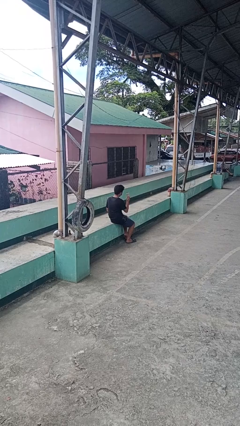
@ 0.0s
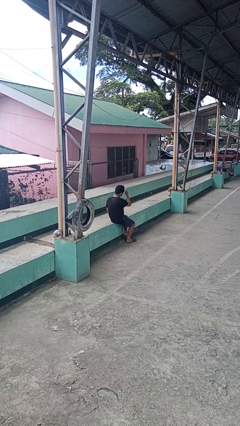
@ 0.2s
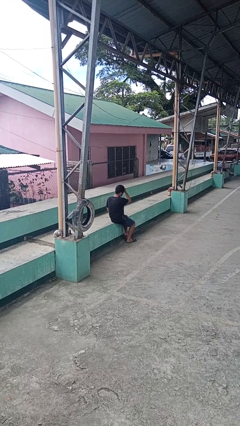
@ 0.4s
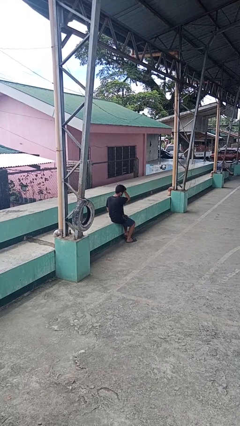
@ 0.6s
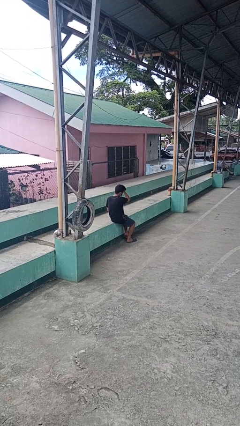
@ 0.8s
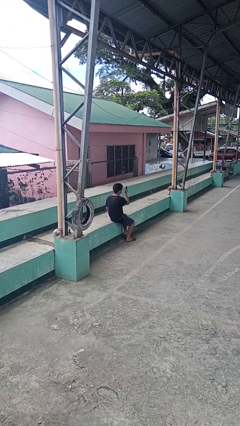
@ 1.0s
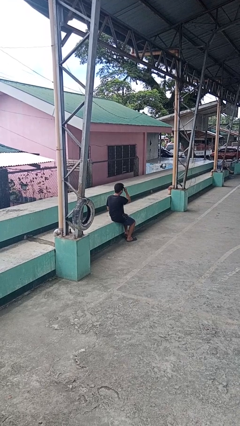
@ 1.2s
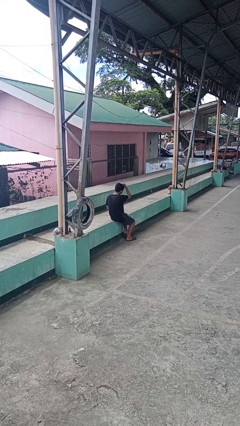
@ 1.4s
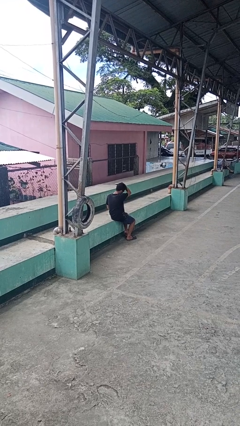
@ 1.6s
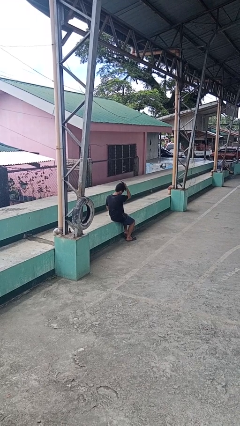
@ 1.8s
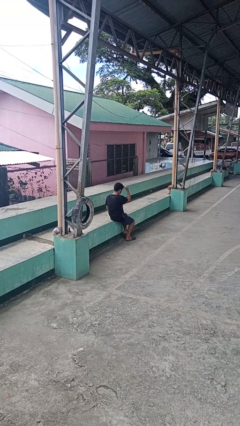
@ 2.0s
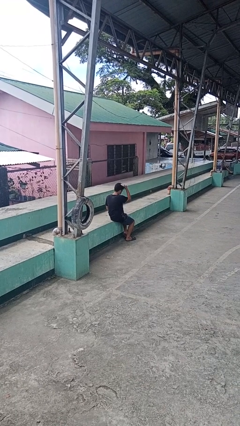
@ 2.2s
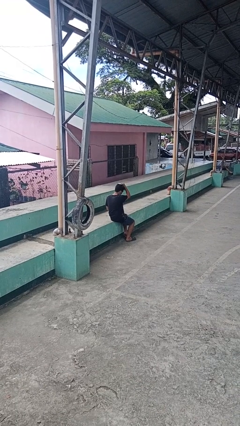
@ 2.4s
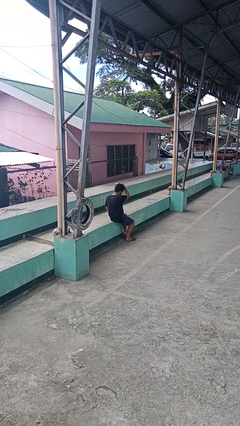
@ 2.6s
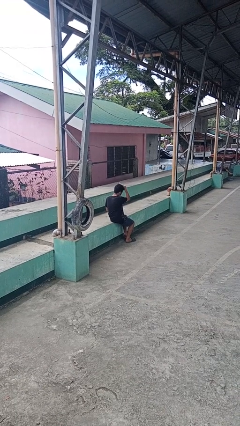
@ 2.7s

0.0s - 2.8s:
person brushes hair

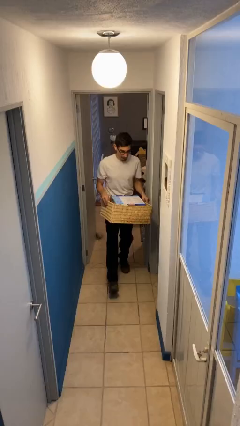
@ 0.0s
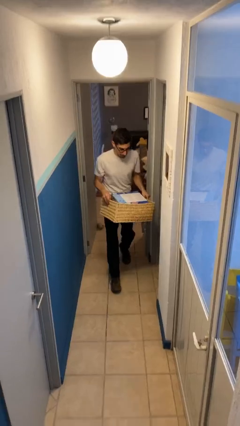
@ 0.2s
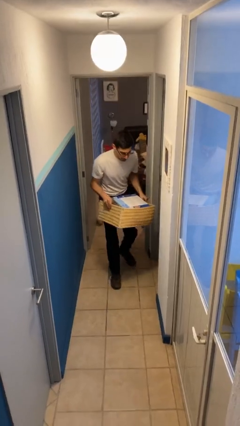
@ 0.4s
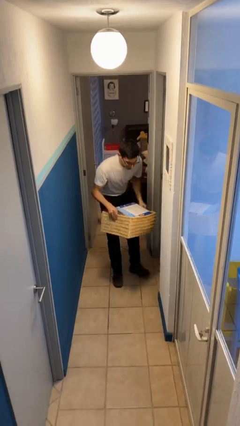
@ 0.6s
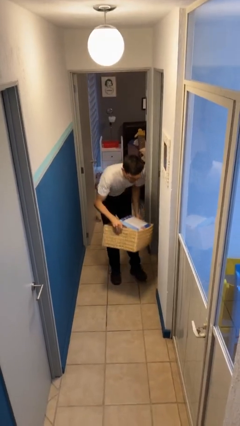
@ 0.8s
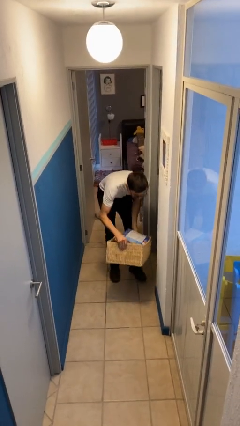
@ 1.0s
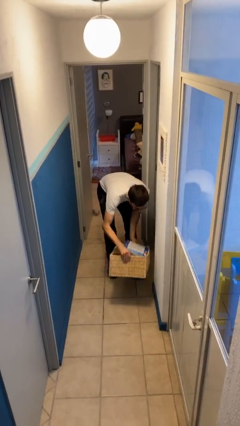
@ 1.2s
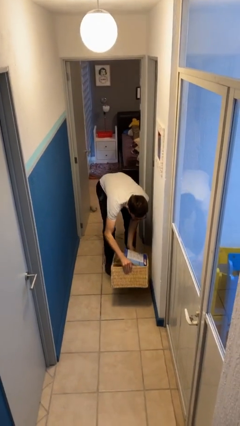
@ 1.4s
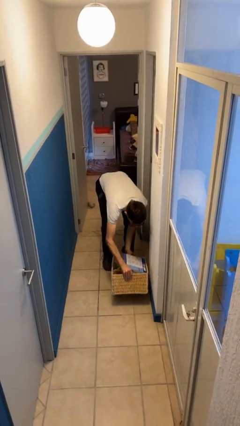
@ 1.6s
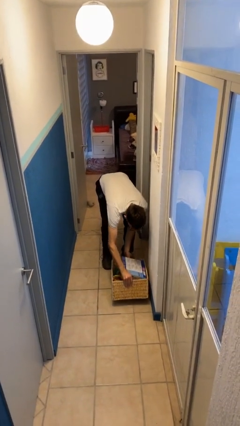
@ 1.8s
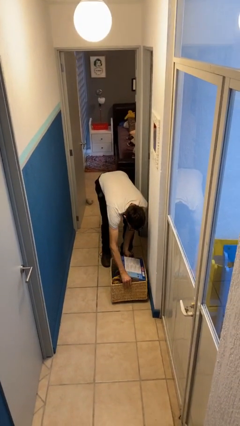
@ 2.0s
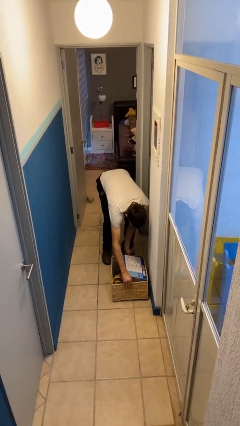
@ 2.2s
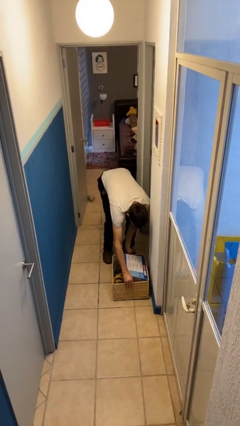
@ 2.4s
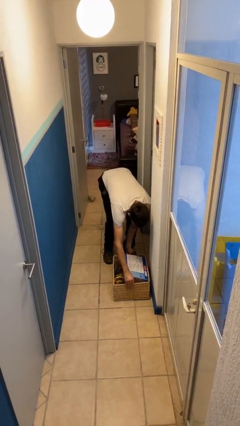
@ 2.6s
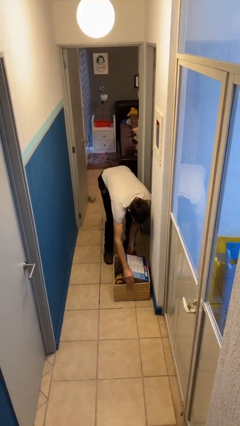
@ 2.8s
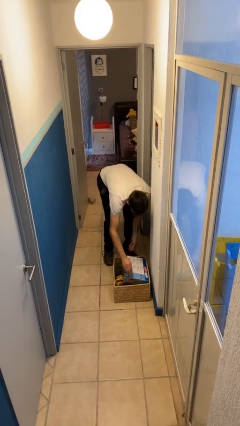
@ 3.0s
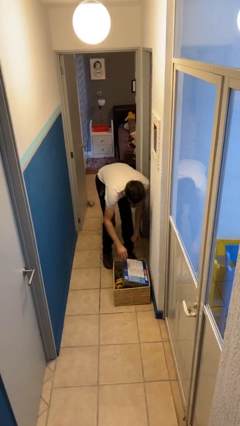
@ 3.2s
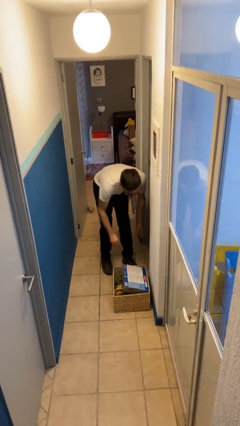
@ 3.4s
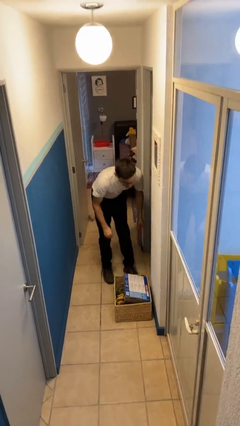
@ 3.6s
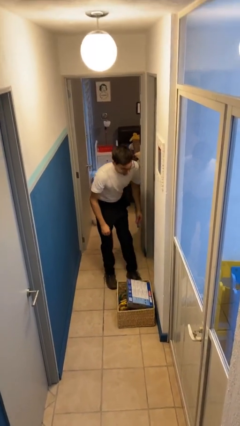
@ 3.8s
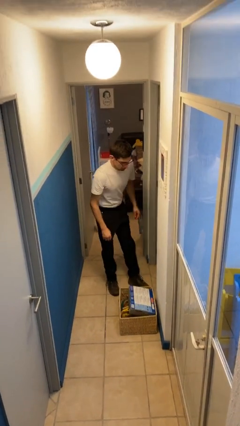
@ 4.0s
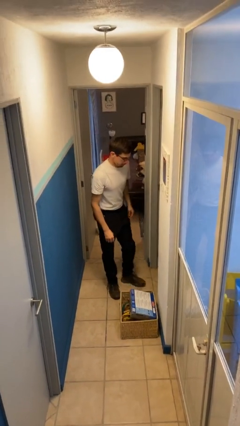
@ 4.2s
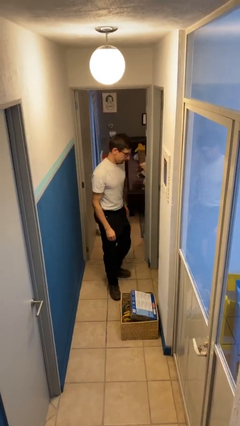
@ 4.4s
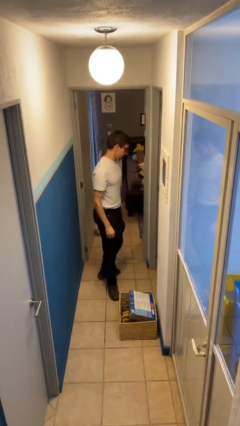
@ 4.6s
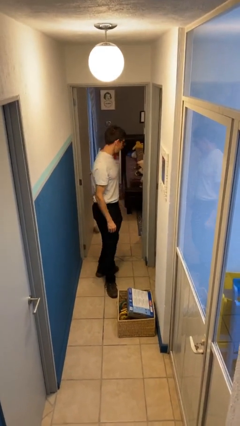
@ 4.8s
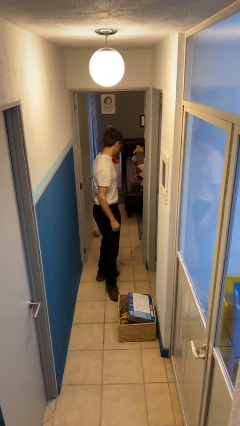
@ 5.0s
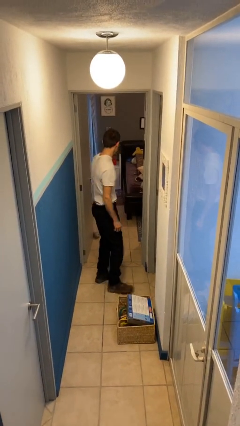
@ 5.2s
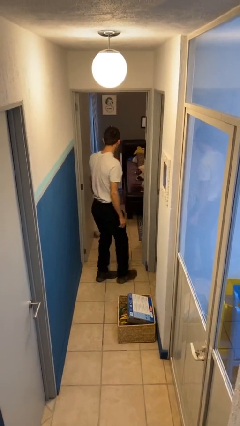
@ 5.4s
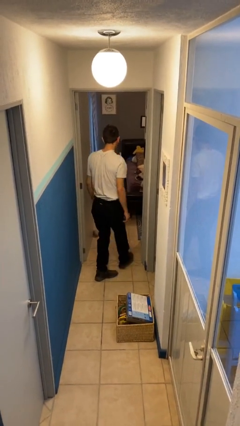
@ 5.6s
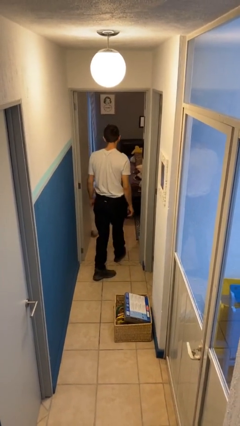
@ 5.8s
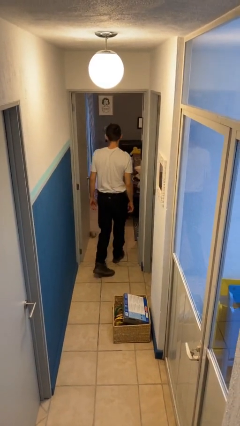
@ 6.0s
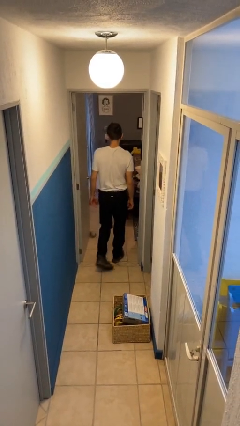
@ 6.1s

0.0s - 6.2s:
person puts down object on floor

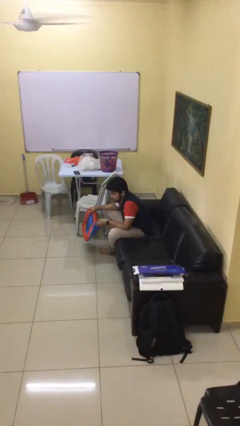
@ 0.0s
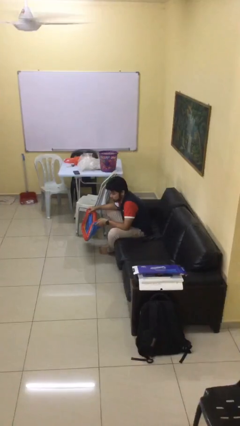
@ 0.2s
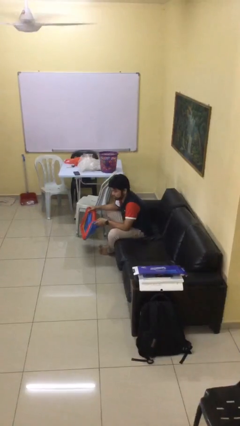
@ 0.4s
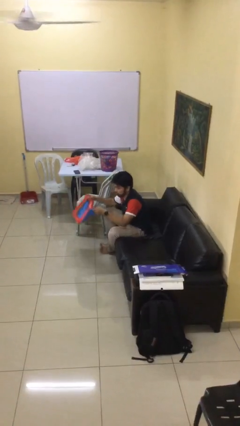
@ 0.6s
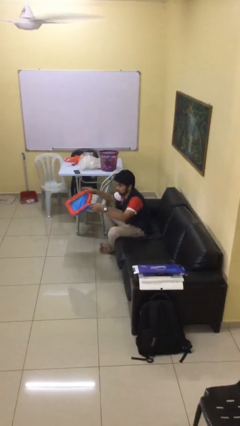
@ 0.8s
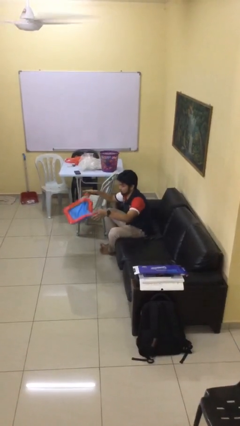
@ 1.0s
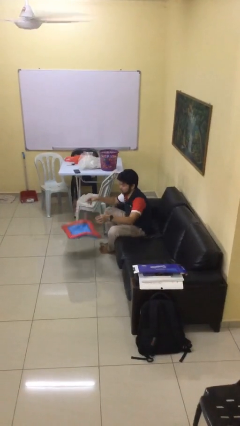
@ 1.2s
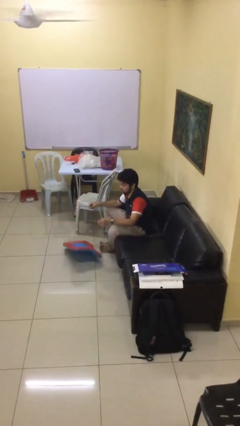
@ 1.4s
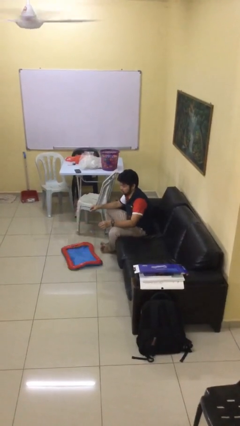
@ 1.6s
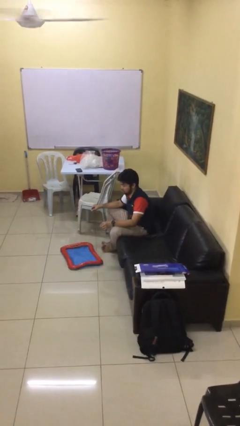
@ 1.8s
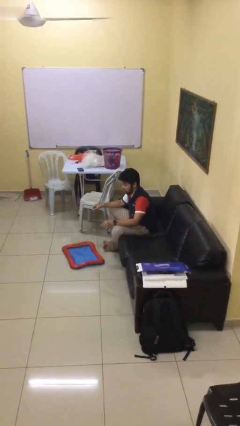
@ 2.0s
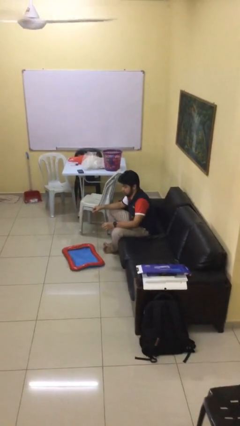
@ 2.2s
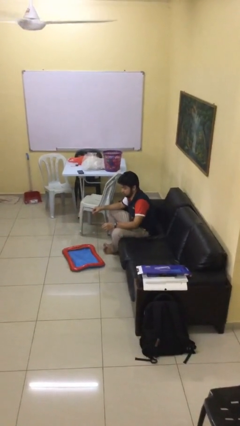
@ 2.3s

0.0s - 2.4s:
person drops object

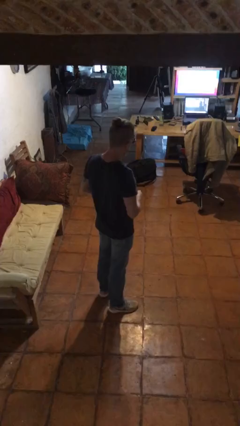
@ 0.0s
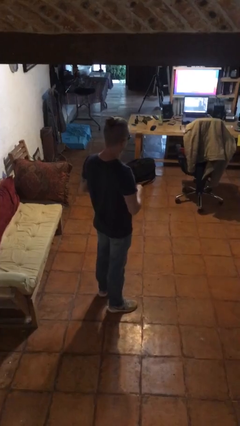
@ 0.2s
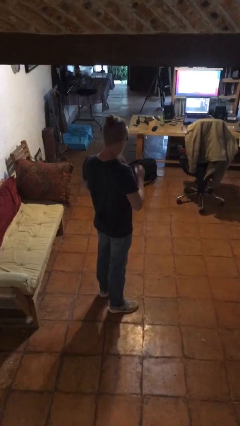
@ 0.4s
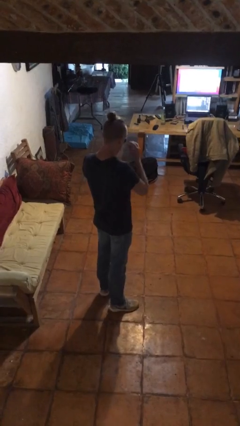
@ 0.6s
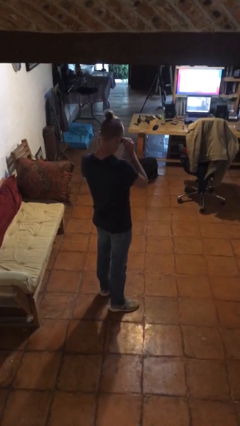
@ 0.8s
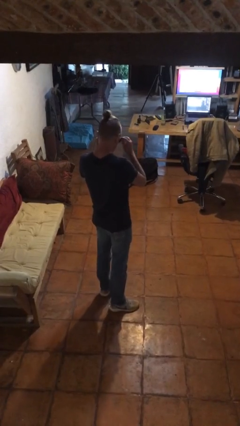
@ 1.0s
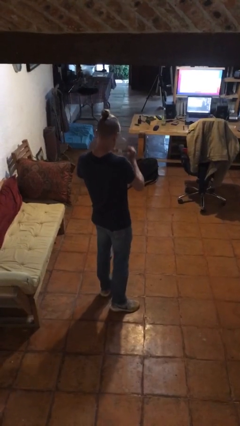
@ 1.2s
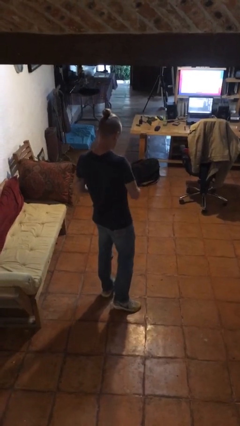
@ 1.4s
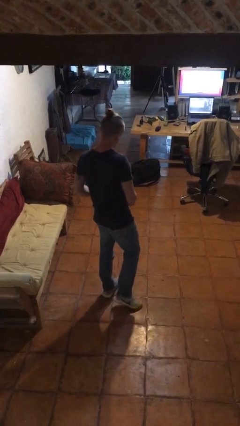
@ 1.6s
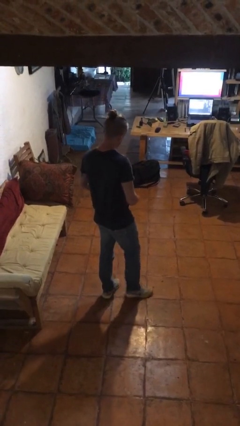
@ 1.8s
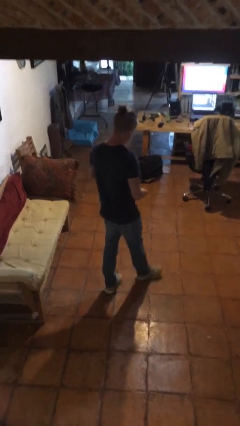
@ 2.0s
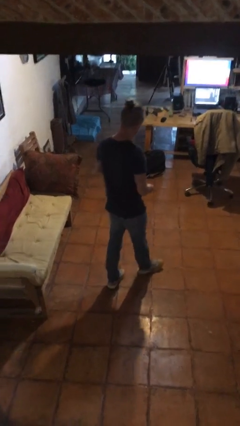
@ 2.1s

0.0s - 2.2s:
person takes off sunglasses

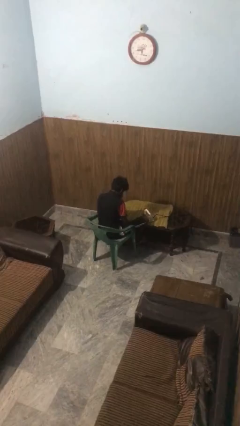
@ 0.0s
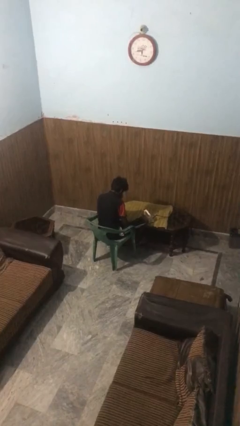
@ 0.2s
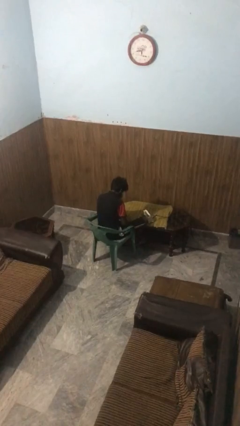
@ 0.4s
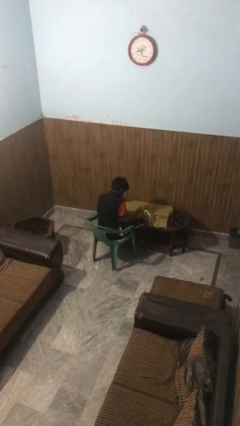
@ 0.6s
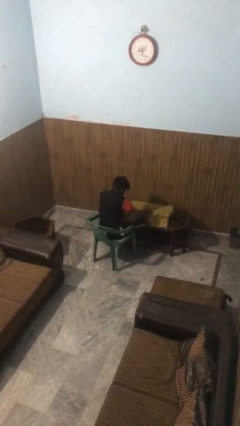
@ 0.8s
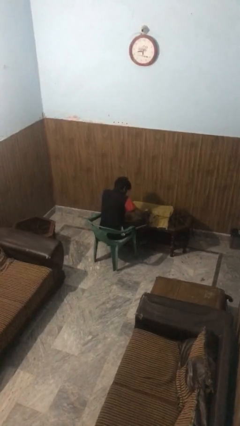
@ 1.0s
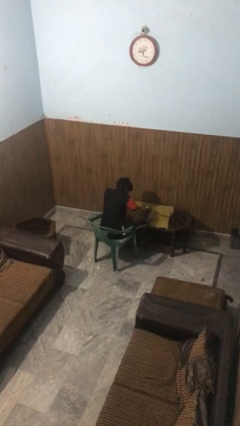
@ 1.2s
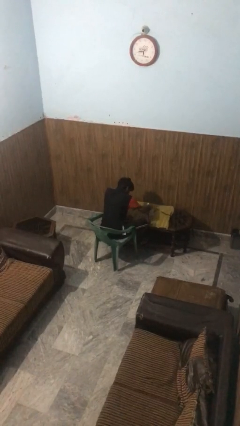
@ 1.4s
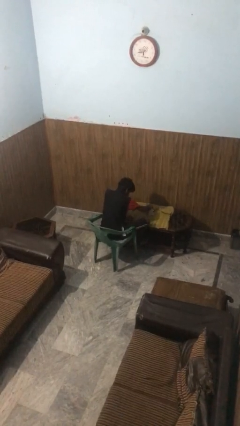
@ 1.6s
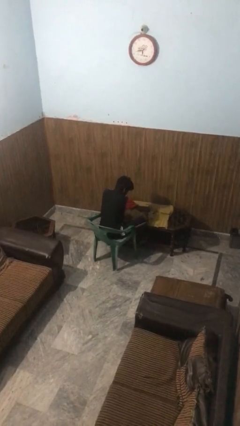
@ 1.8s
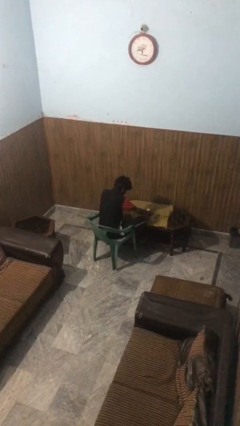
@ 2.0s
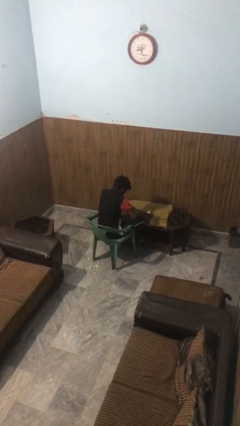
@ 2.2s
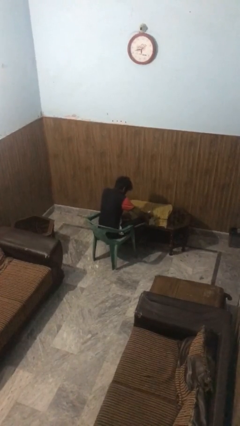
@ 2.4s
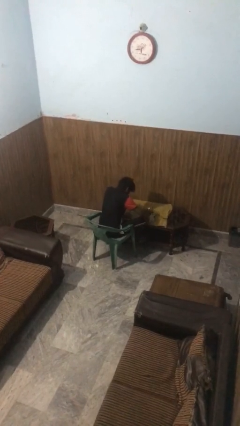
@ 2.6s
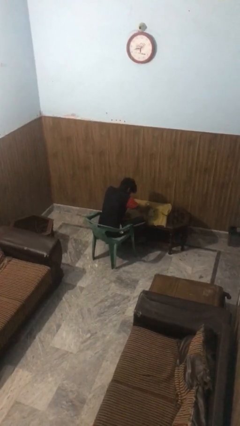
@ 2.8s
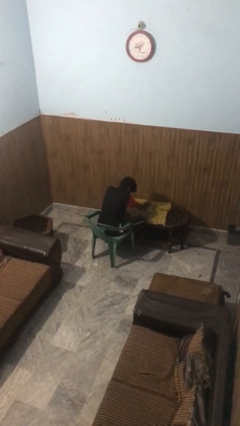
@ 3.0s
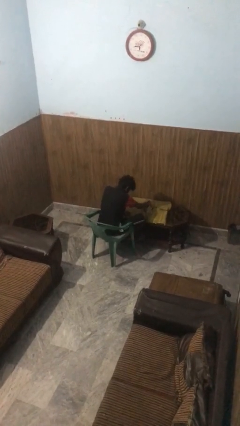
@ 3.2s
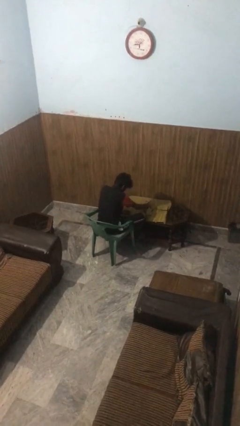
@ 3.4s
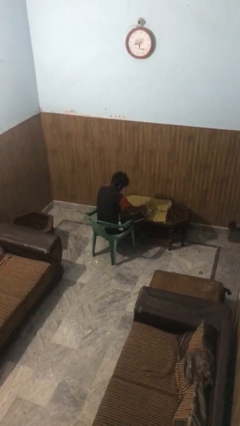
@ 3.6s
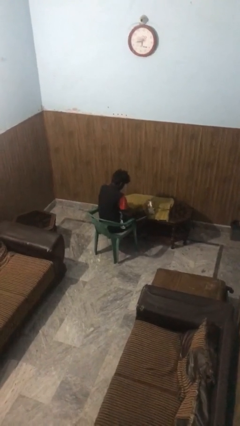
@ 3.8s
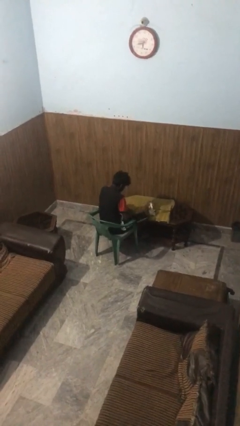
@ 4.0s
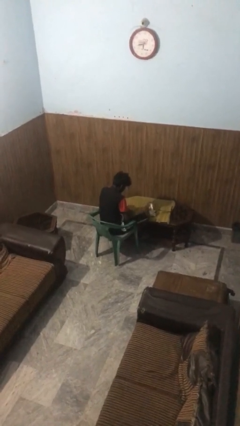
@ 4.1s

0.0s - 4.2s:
person irons clothes
